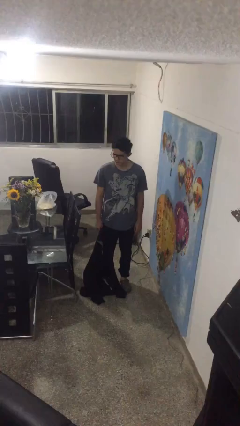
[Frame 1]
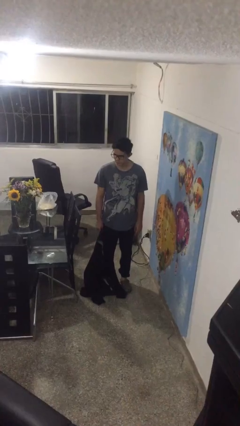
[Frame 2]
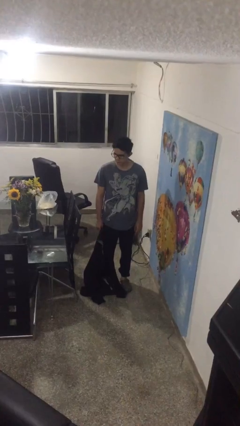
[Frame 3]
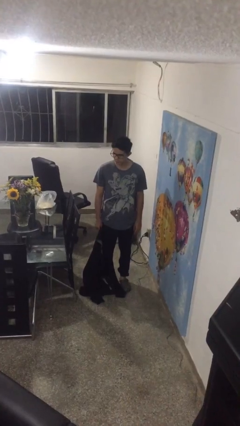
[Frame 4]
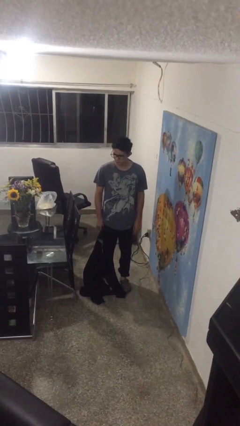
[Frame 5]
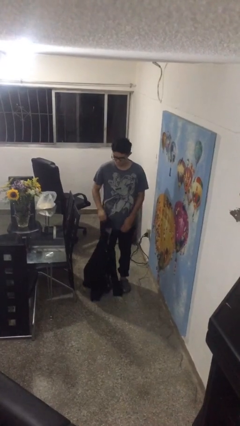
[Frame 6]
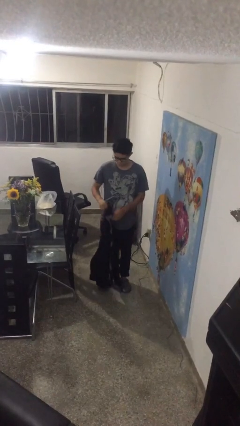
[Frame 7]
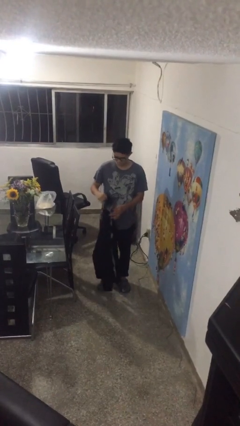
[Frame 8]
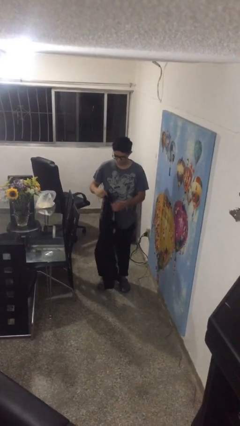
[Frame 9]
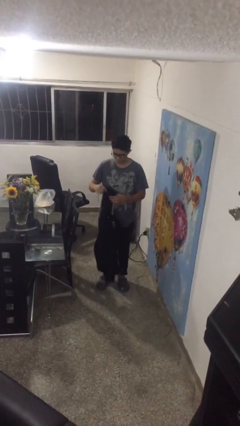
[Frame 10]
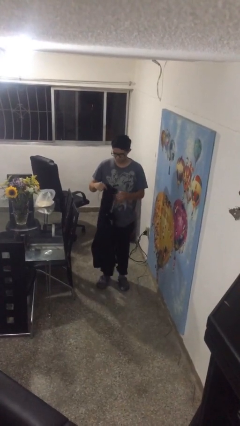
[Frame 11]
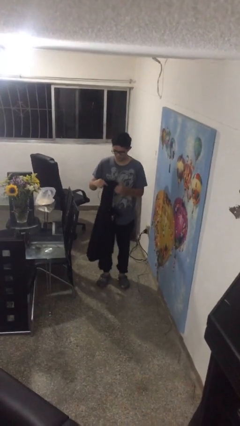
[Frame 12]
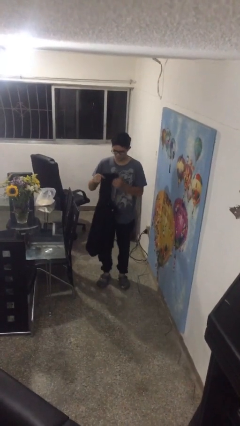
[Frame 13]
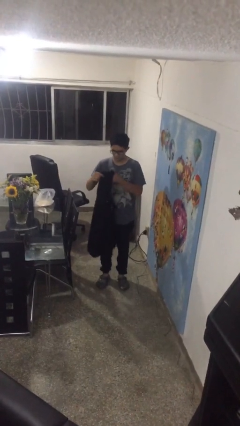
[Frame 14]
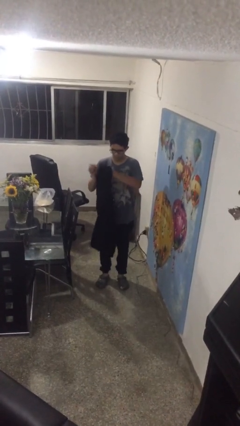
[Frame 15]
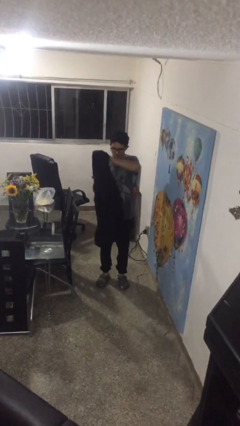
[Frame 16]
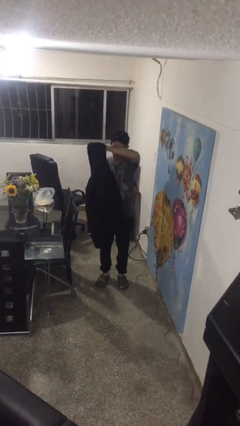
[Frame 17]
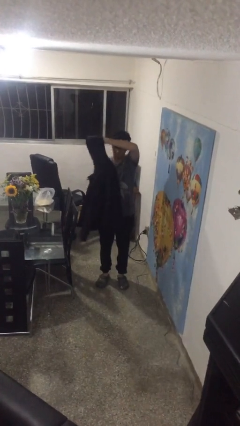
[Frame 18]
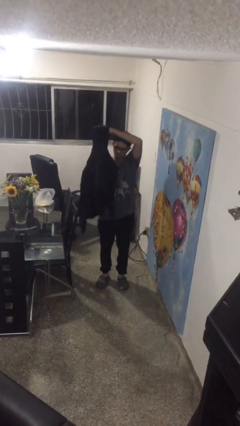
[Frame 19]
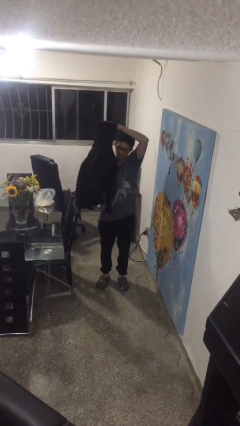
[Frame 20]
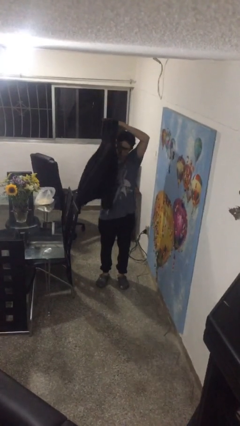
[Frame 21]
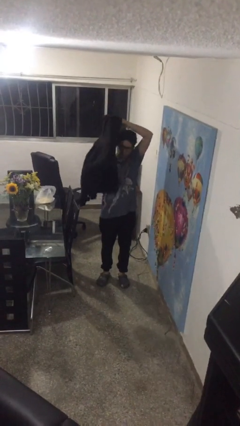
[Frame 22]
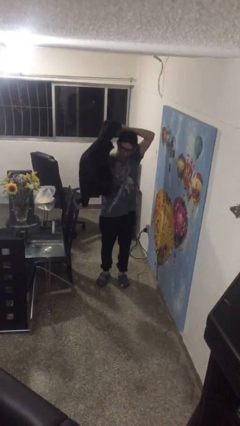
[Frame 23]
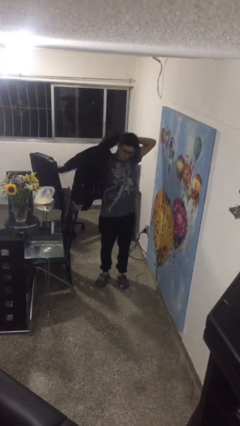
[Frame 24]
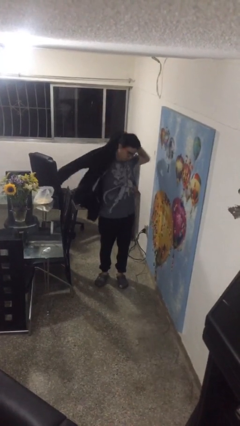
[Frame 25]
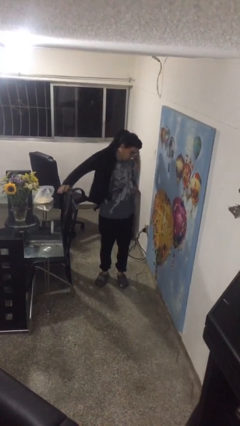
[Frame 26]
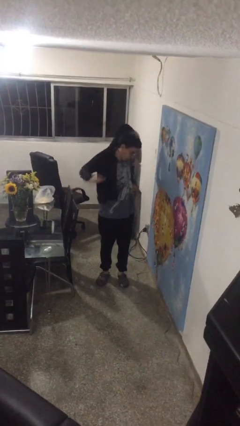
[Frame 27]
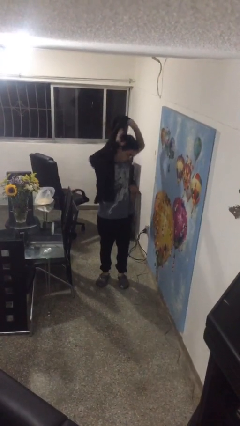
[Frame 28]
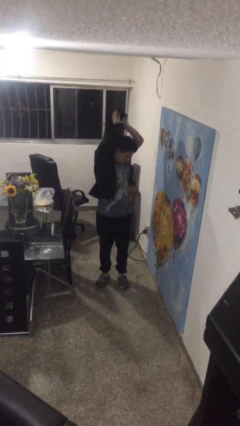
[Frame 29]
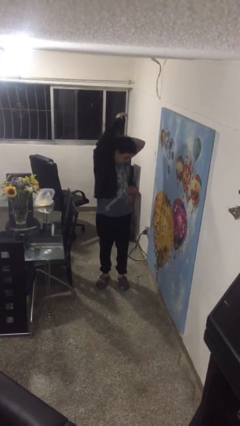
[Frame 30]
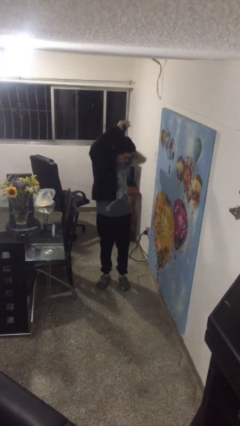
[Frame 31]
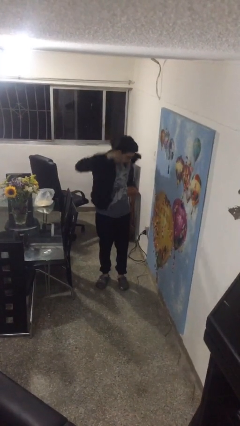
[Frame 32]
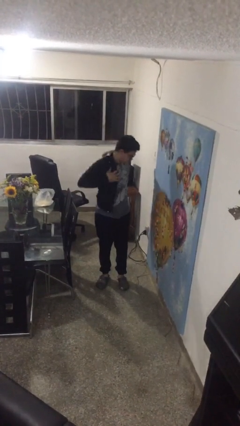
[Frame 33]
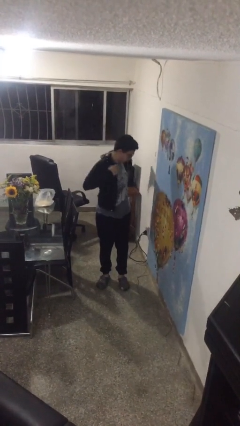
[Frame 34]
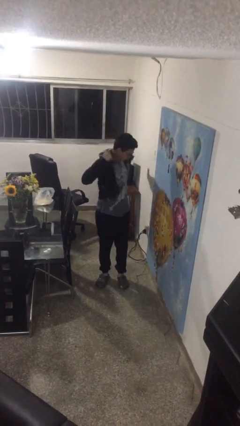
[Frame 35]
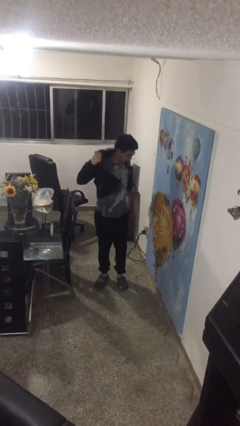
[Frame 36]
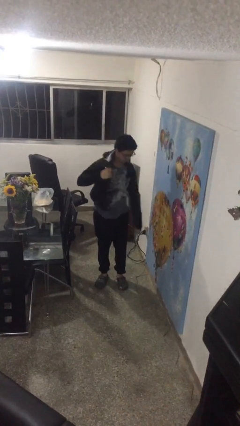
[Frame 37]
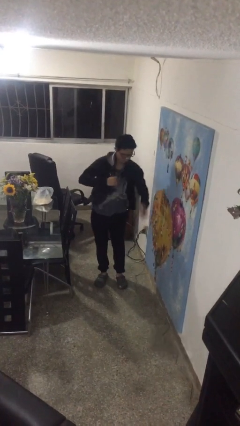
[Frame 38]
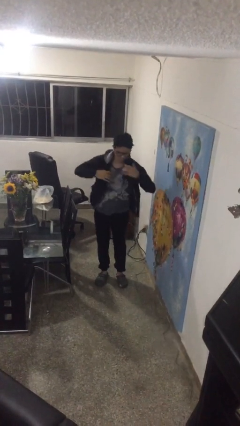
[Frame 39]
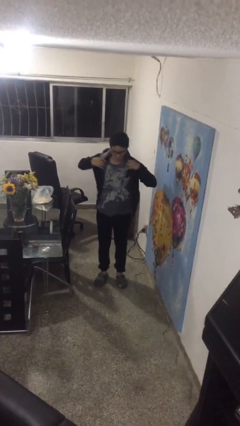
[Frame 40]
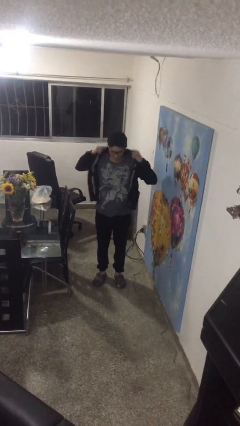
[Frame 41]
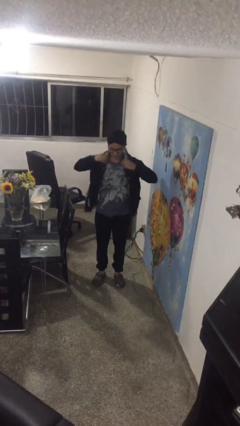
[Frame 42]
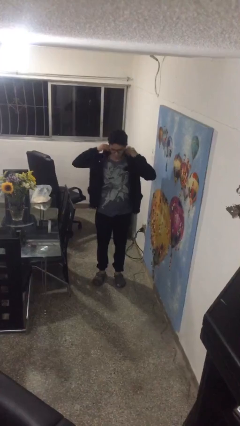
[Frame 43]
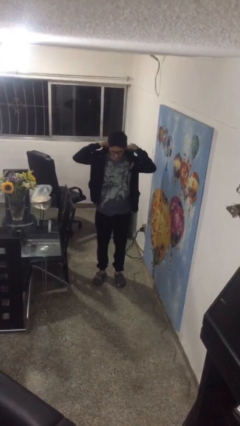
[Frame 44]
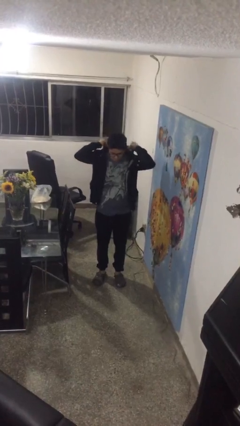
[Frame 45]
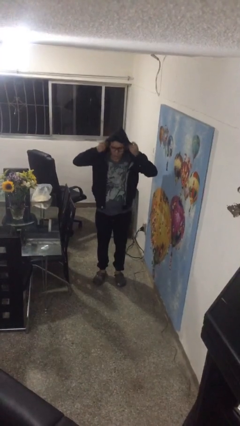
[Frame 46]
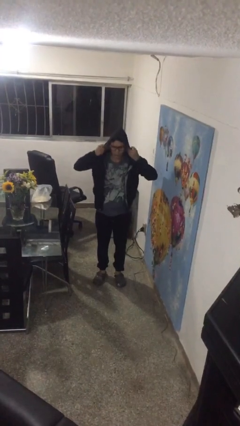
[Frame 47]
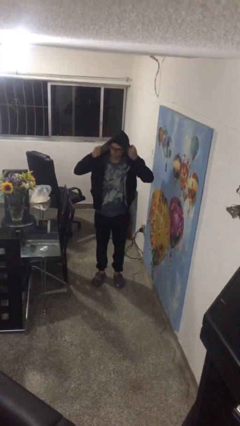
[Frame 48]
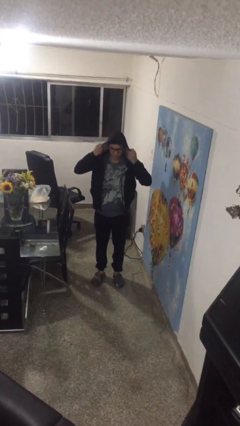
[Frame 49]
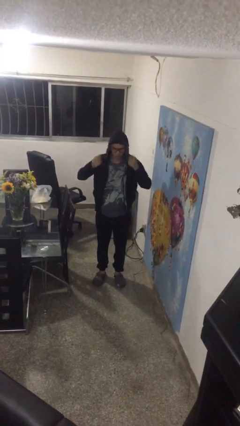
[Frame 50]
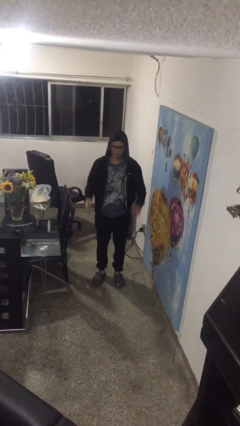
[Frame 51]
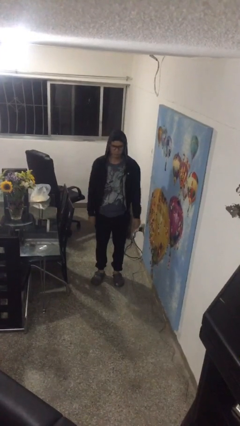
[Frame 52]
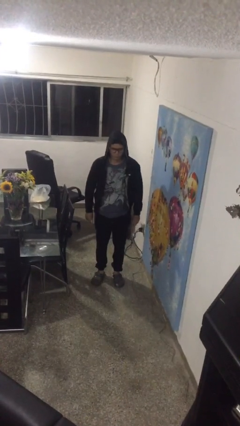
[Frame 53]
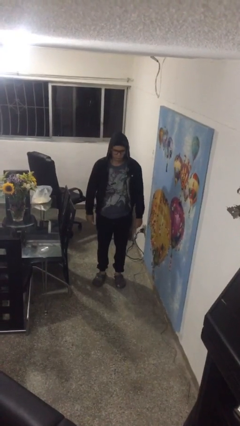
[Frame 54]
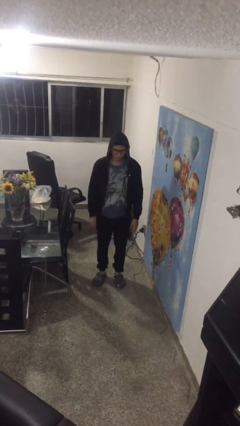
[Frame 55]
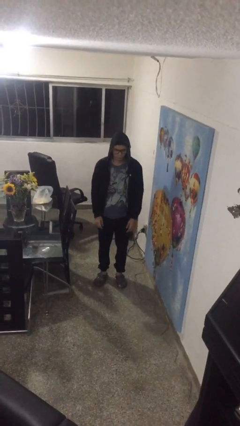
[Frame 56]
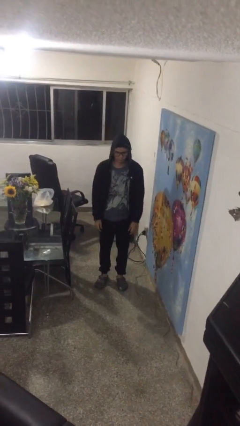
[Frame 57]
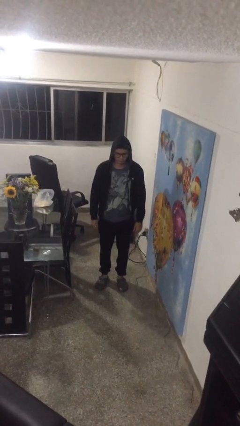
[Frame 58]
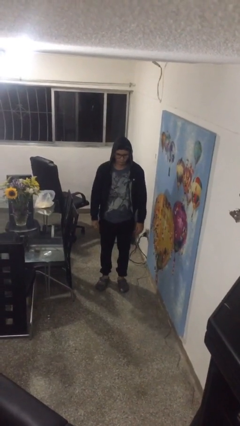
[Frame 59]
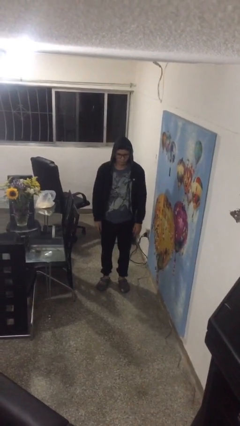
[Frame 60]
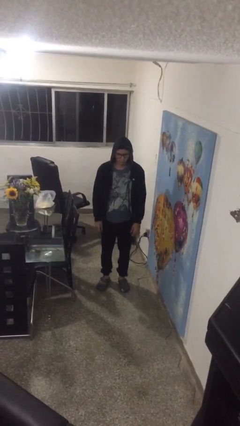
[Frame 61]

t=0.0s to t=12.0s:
person puts on hoodie

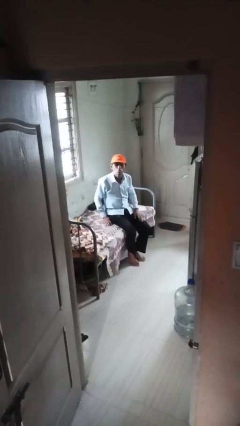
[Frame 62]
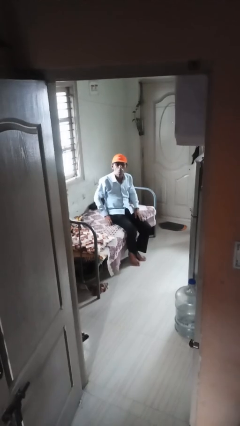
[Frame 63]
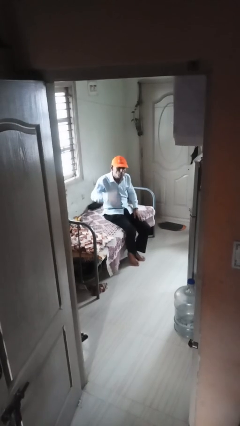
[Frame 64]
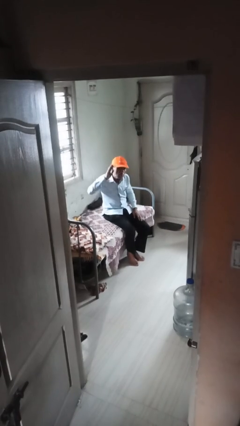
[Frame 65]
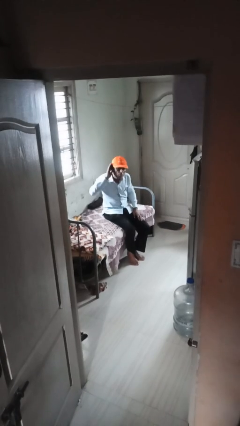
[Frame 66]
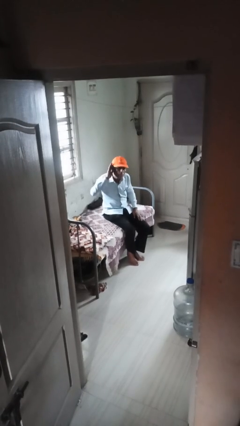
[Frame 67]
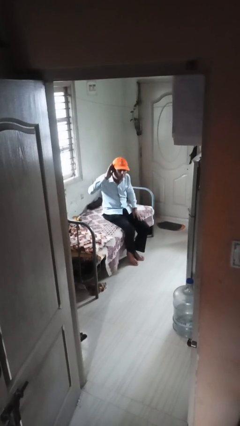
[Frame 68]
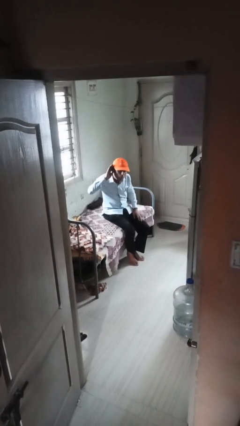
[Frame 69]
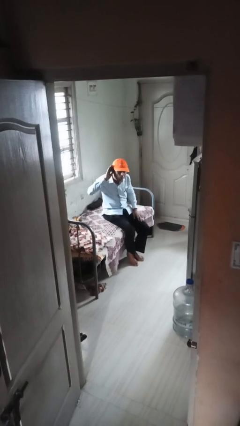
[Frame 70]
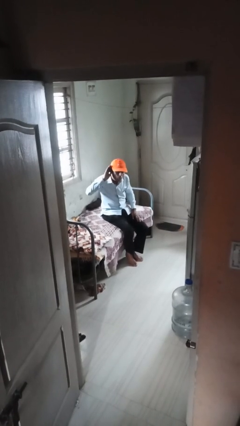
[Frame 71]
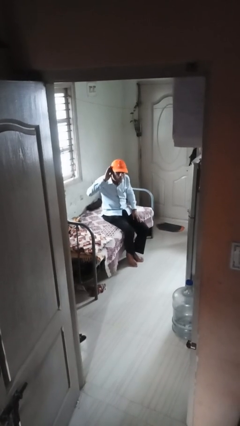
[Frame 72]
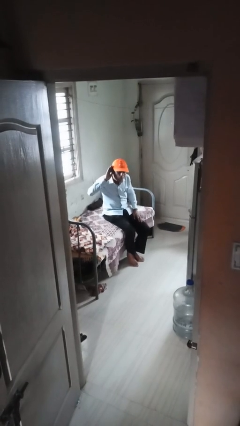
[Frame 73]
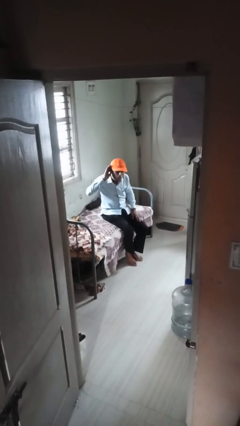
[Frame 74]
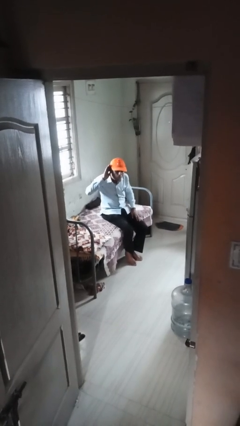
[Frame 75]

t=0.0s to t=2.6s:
person gestures listen closely

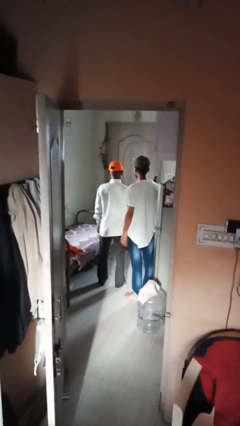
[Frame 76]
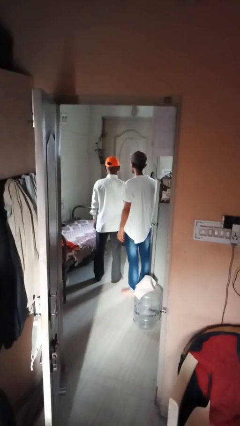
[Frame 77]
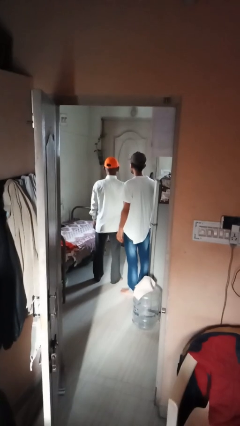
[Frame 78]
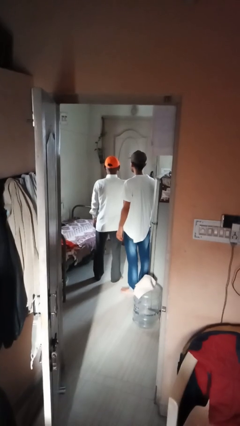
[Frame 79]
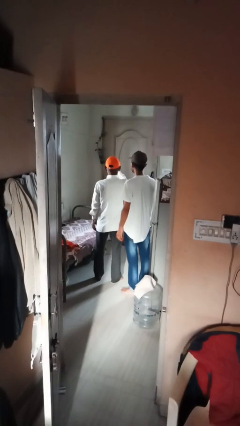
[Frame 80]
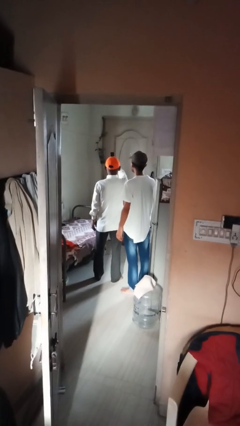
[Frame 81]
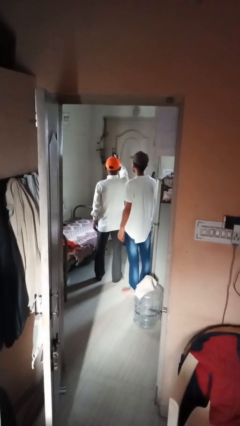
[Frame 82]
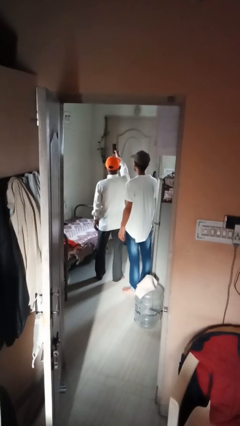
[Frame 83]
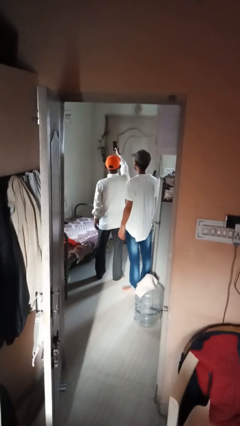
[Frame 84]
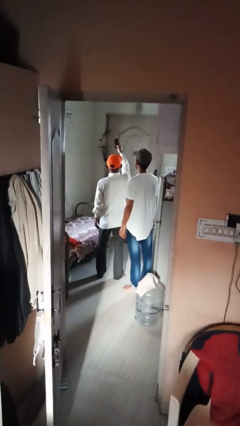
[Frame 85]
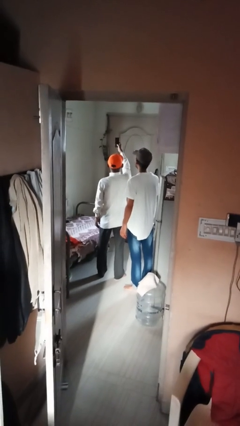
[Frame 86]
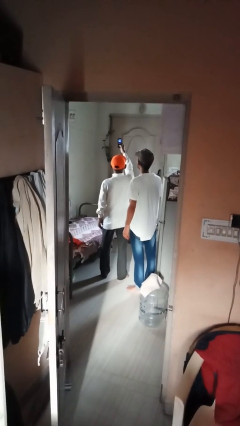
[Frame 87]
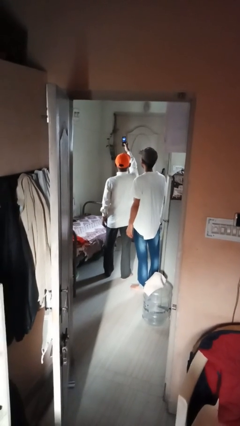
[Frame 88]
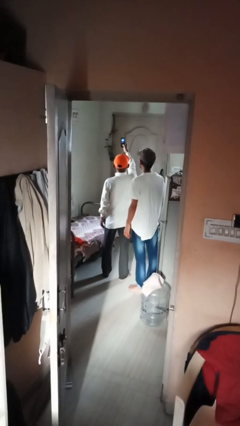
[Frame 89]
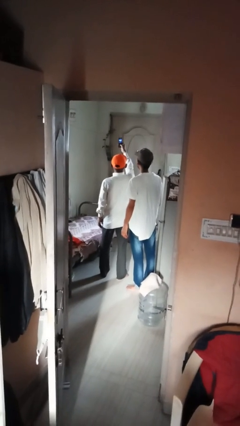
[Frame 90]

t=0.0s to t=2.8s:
person takes selfie with person
